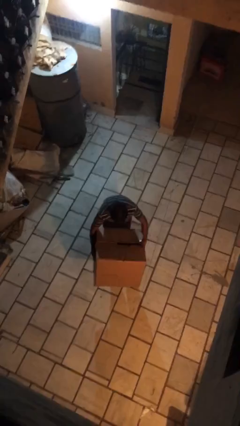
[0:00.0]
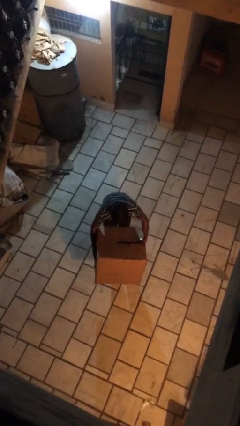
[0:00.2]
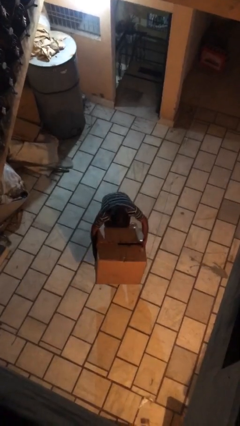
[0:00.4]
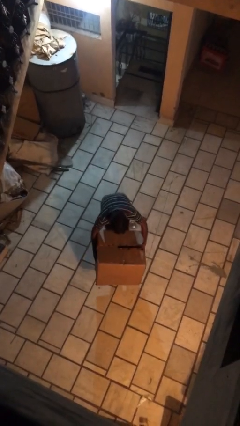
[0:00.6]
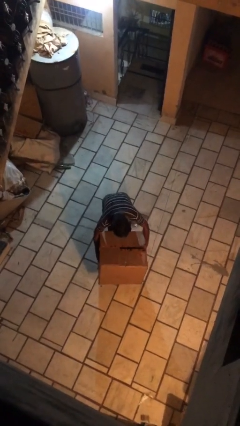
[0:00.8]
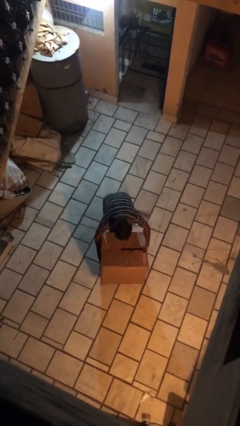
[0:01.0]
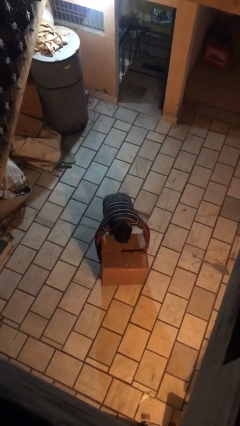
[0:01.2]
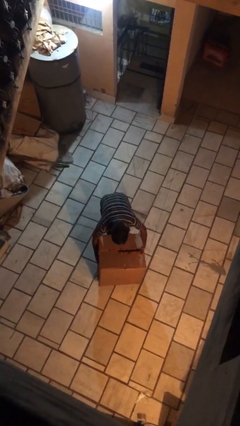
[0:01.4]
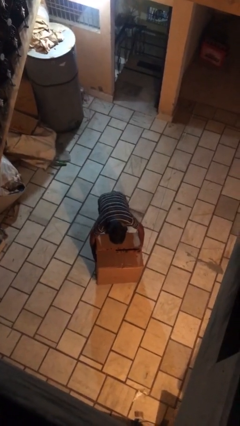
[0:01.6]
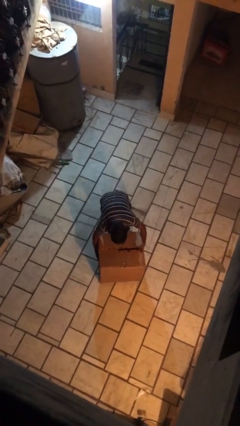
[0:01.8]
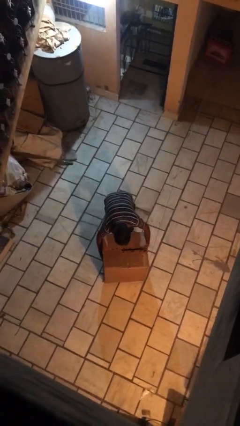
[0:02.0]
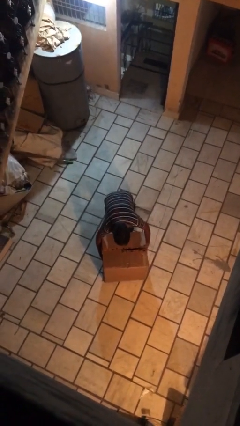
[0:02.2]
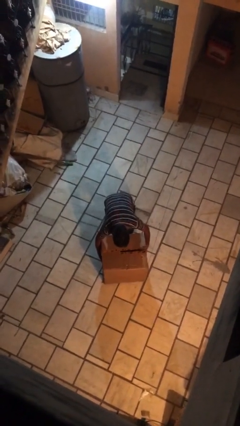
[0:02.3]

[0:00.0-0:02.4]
person puts down object on floor

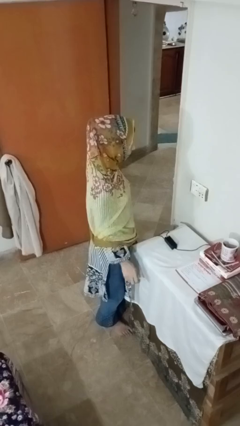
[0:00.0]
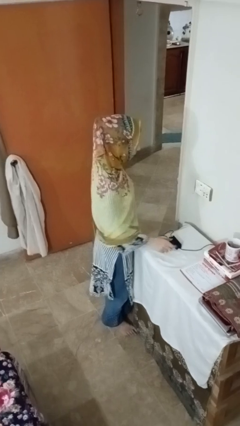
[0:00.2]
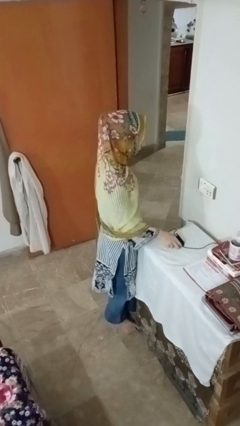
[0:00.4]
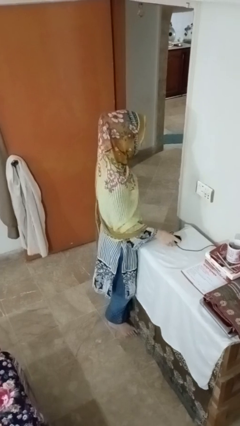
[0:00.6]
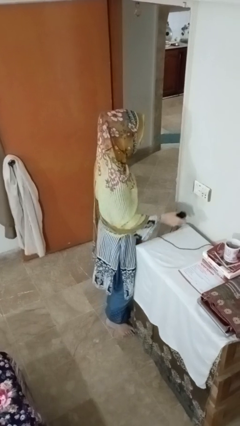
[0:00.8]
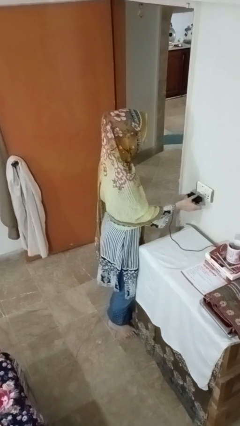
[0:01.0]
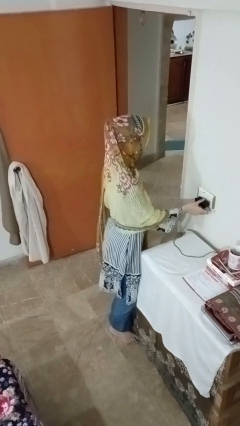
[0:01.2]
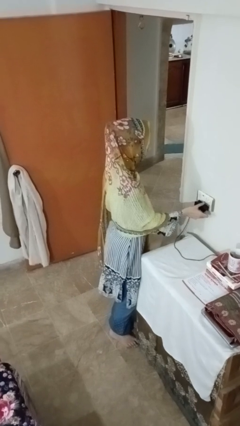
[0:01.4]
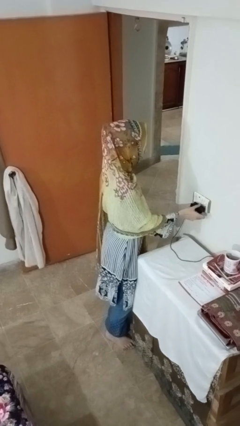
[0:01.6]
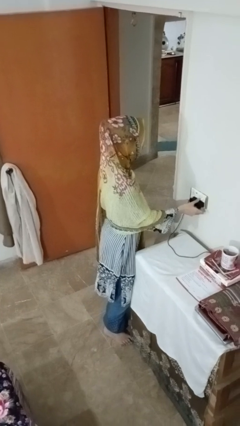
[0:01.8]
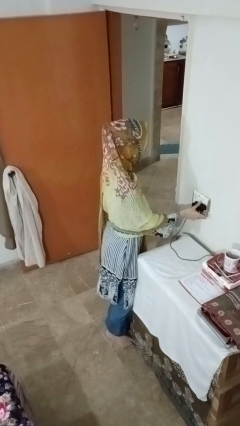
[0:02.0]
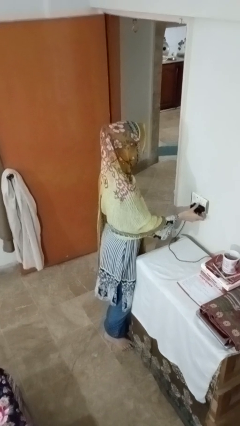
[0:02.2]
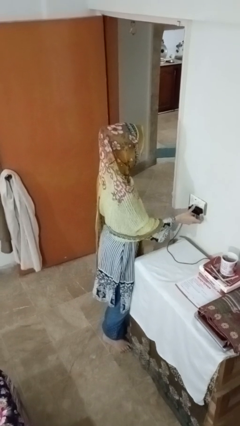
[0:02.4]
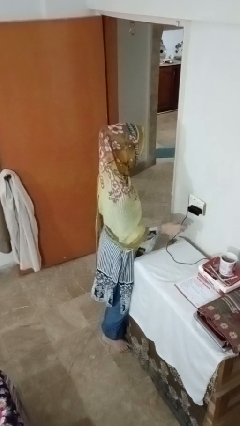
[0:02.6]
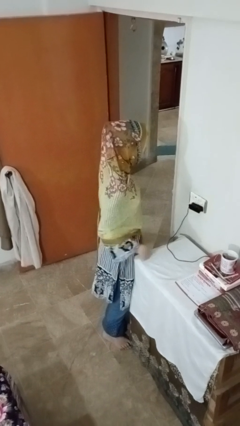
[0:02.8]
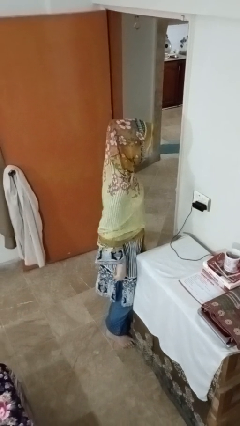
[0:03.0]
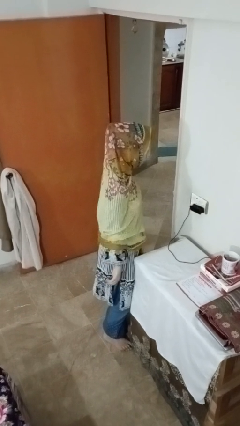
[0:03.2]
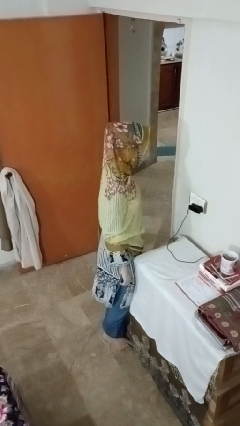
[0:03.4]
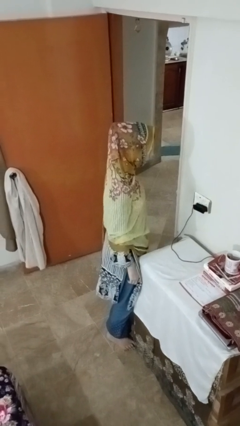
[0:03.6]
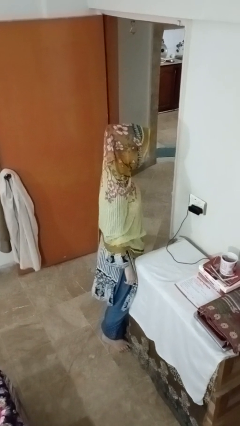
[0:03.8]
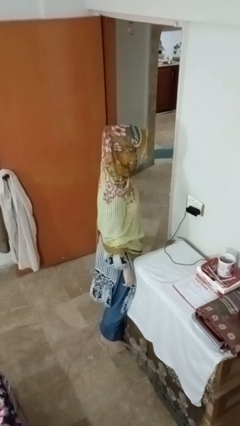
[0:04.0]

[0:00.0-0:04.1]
person plugs into electrical socket

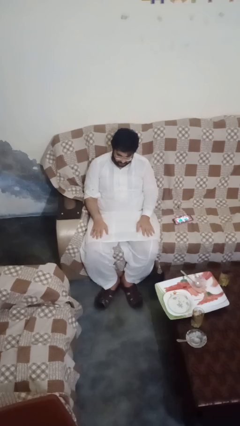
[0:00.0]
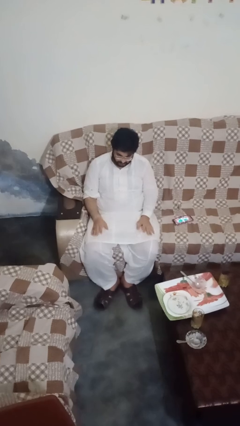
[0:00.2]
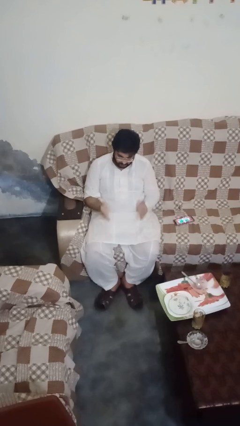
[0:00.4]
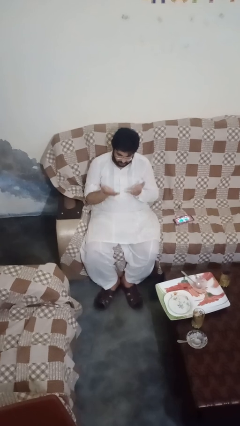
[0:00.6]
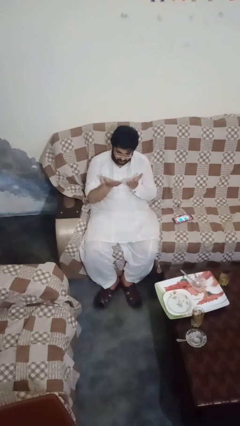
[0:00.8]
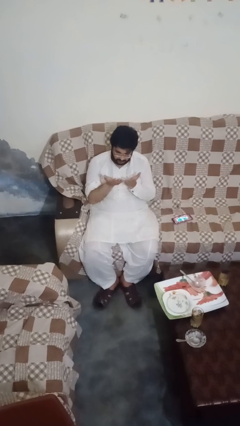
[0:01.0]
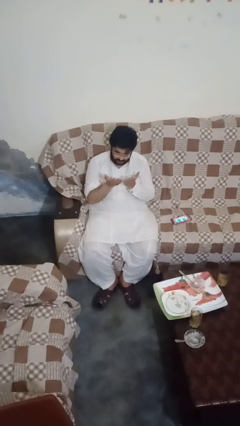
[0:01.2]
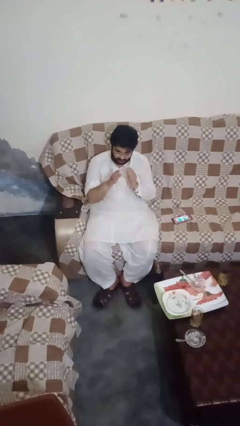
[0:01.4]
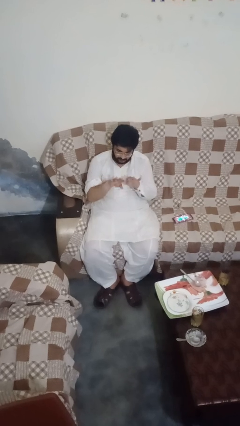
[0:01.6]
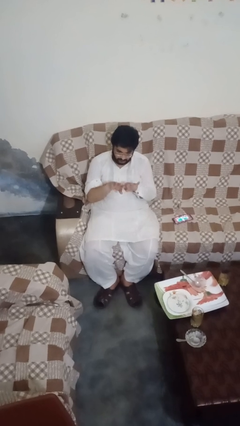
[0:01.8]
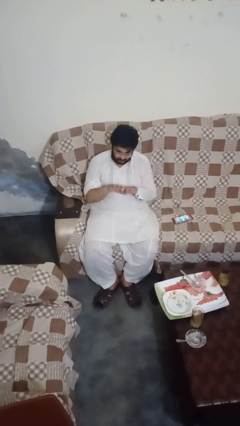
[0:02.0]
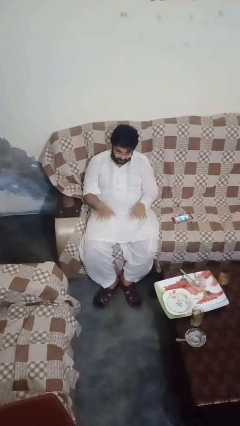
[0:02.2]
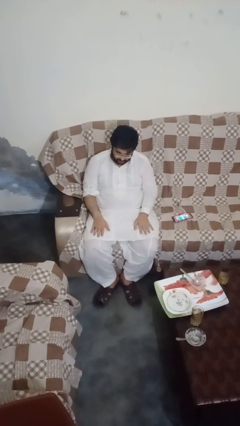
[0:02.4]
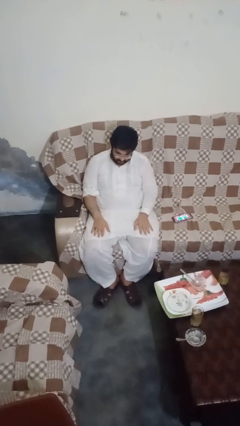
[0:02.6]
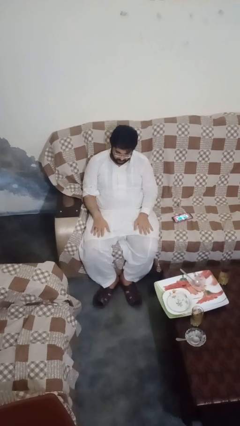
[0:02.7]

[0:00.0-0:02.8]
person looks at hands in lap

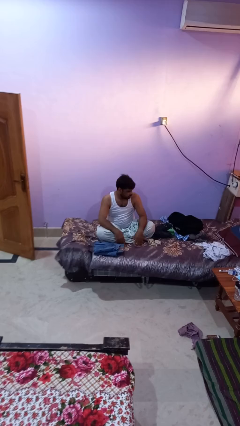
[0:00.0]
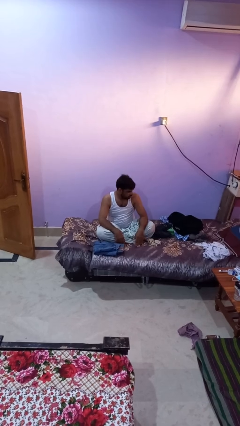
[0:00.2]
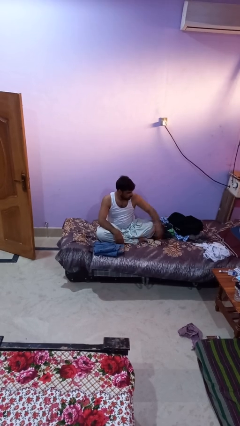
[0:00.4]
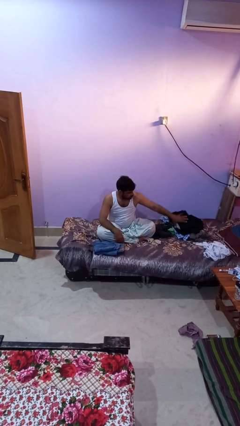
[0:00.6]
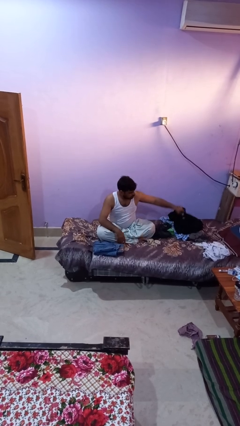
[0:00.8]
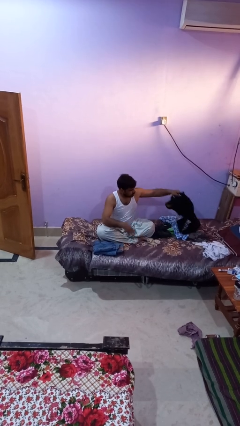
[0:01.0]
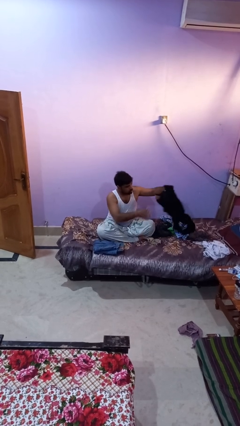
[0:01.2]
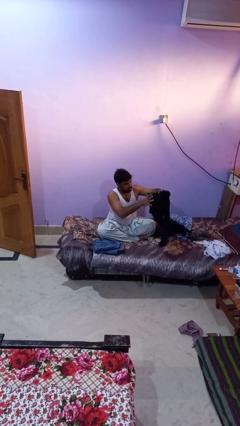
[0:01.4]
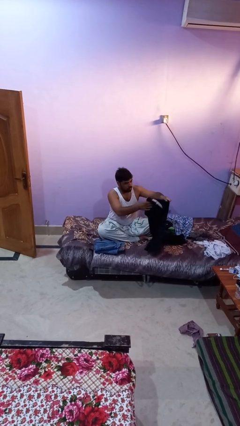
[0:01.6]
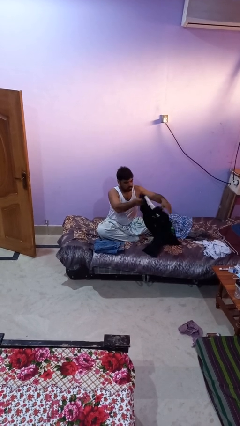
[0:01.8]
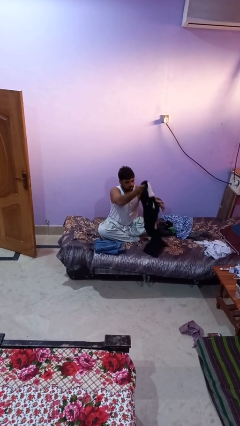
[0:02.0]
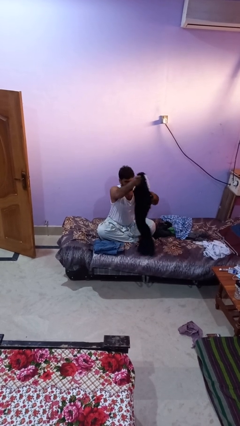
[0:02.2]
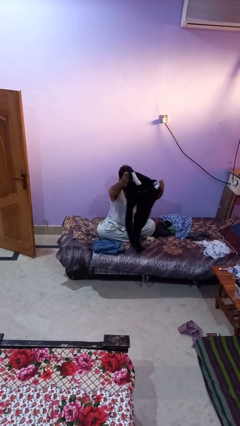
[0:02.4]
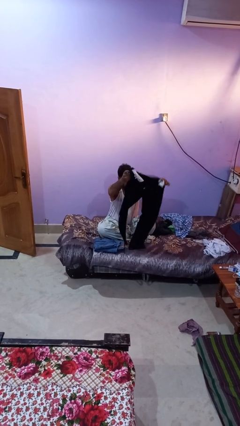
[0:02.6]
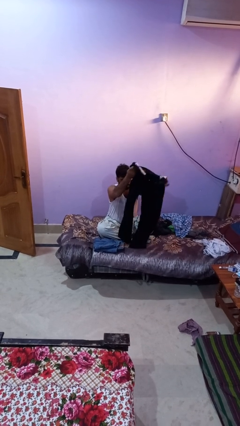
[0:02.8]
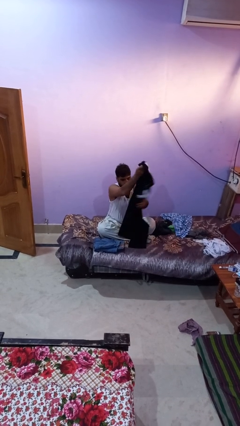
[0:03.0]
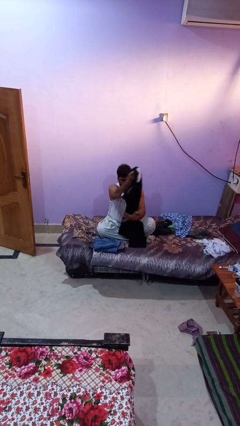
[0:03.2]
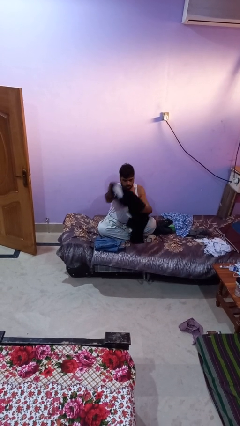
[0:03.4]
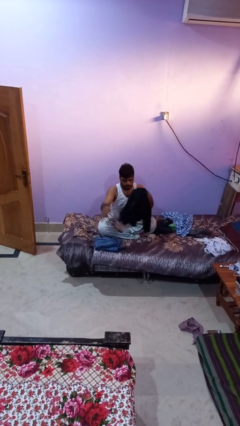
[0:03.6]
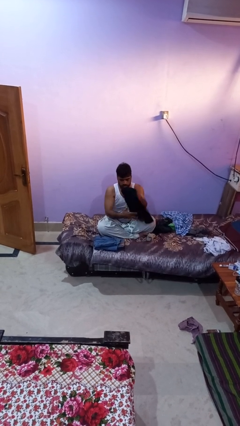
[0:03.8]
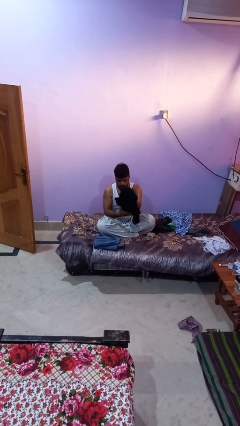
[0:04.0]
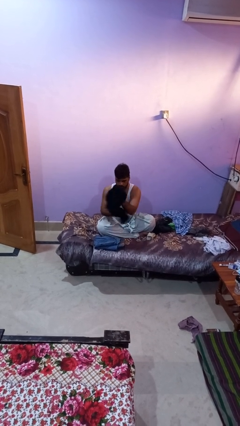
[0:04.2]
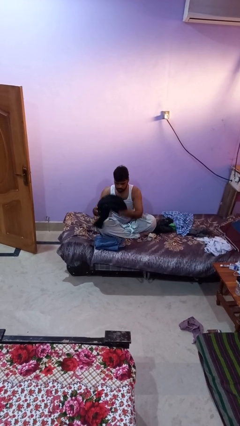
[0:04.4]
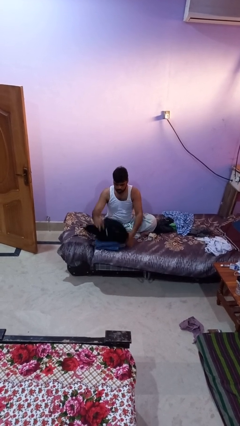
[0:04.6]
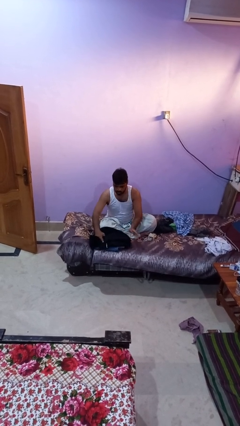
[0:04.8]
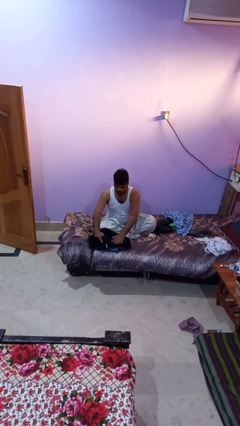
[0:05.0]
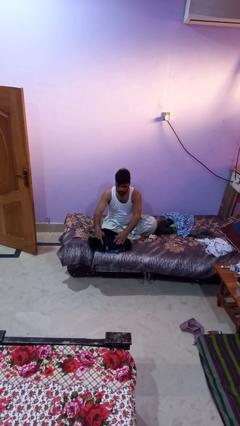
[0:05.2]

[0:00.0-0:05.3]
person folds pants

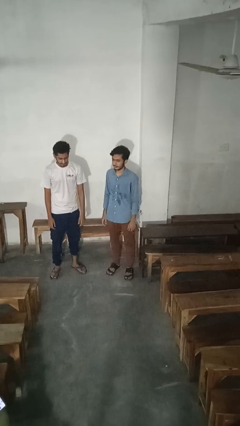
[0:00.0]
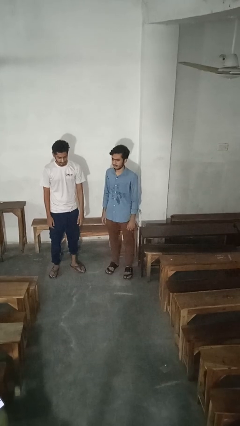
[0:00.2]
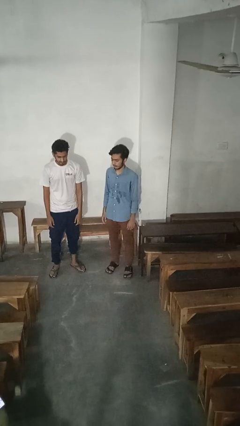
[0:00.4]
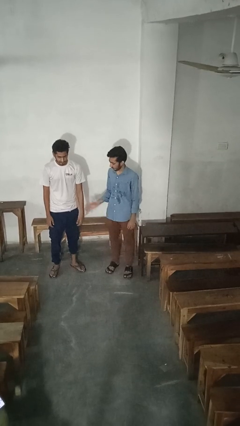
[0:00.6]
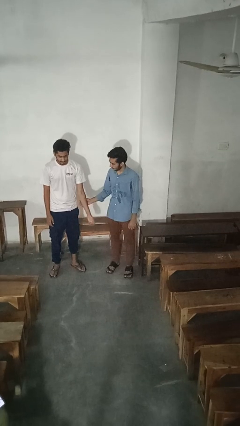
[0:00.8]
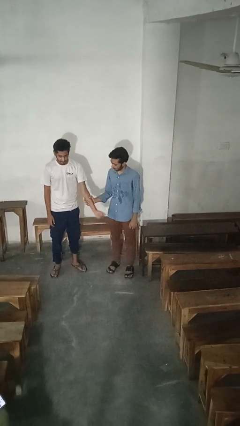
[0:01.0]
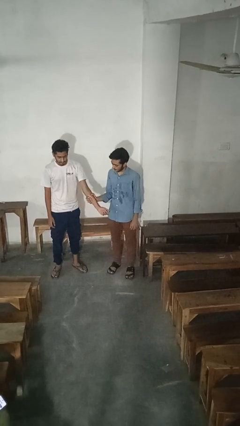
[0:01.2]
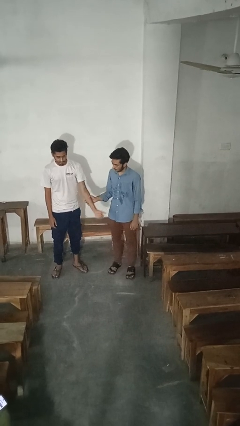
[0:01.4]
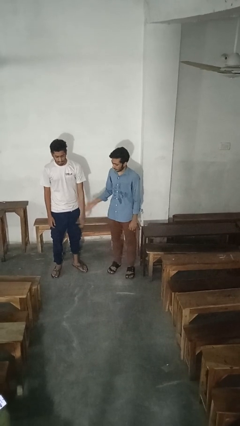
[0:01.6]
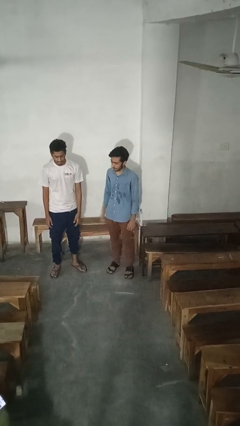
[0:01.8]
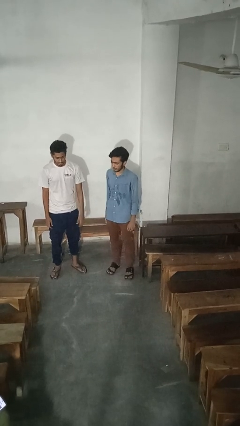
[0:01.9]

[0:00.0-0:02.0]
person grabs person by forearm

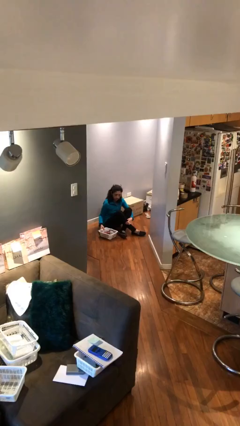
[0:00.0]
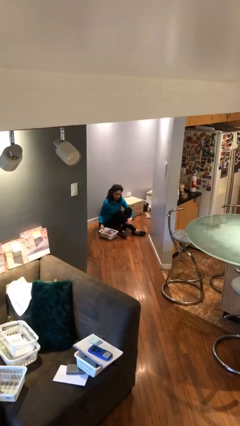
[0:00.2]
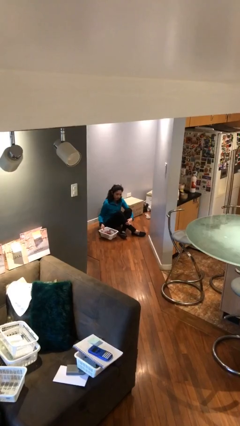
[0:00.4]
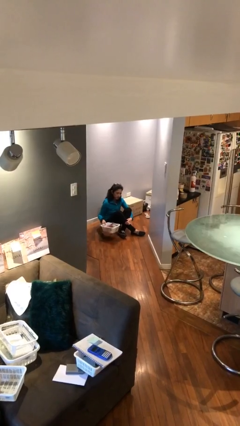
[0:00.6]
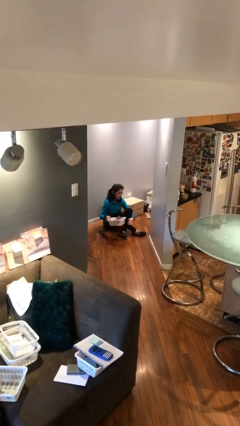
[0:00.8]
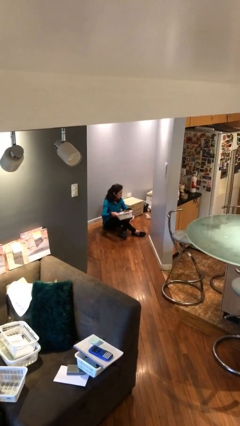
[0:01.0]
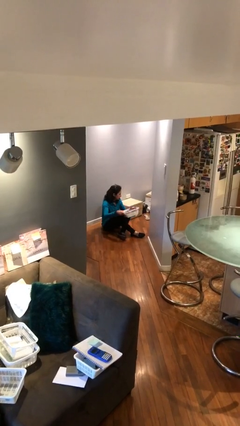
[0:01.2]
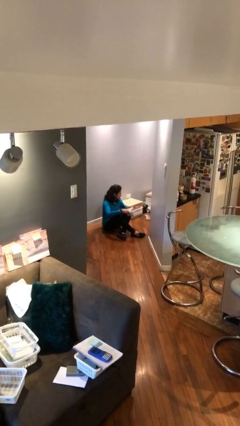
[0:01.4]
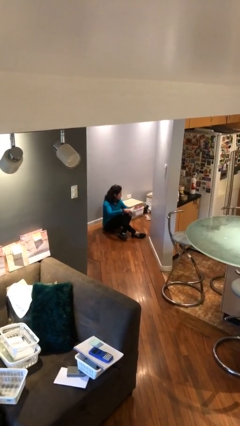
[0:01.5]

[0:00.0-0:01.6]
person picks up object from floor
